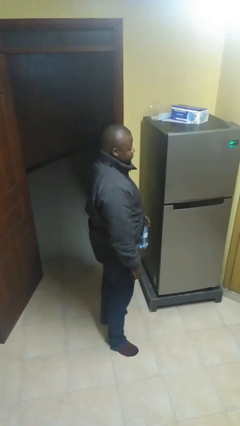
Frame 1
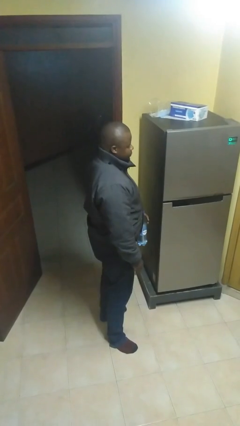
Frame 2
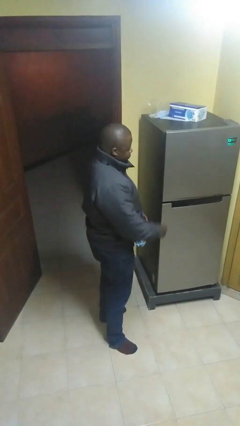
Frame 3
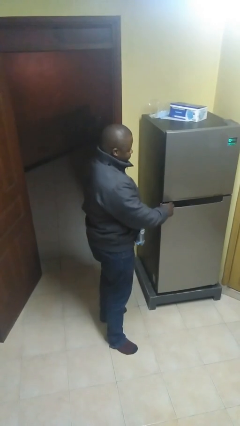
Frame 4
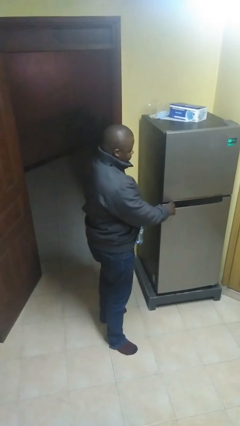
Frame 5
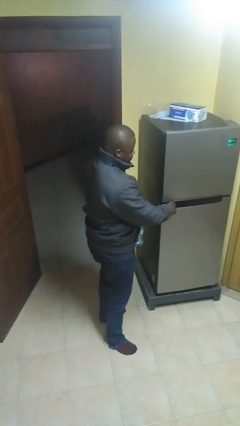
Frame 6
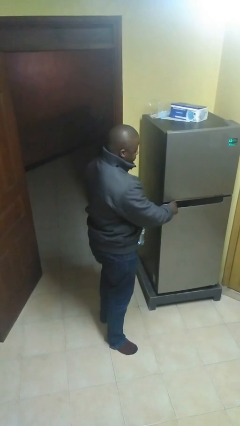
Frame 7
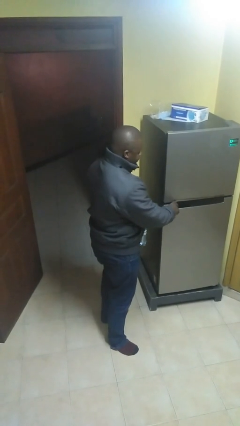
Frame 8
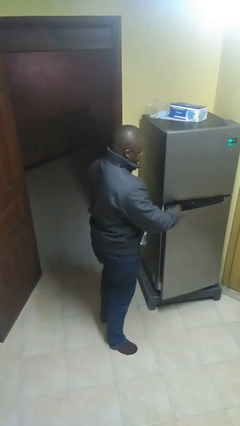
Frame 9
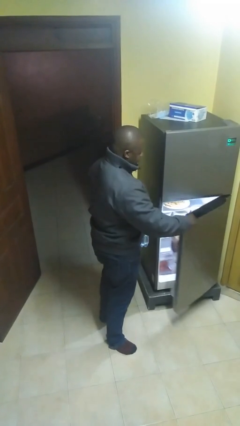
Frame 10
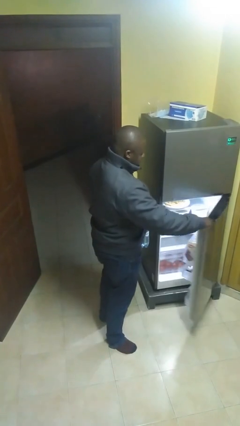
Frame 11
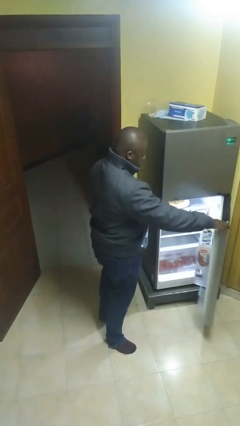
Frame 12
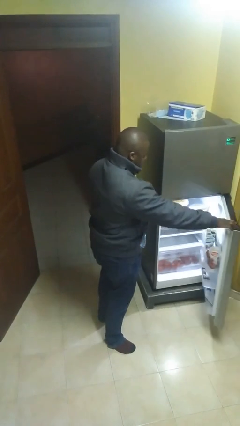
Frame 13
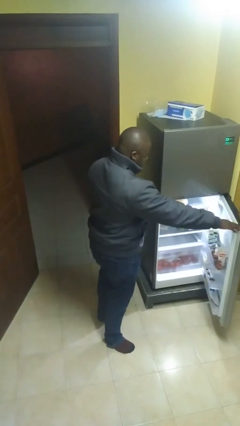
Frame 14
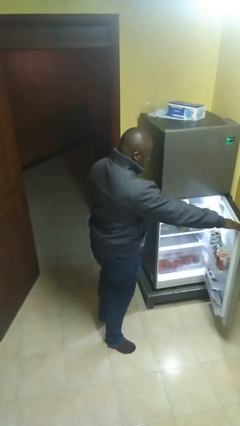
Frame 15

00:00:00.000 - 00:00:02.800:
person opens refrigerator

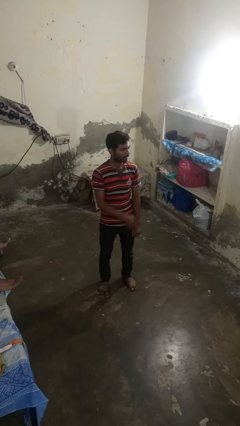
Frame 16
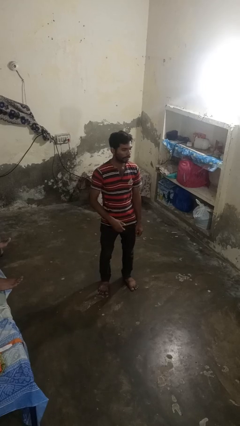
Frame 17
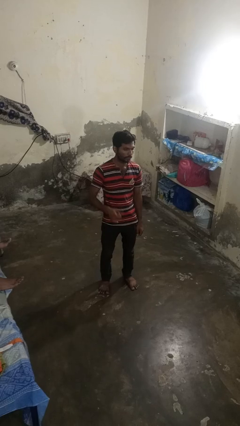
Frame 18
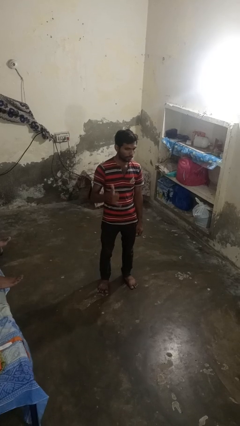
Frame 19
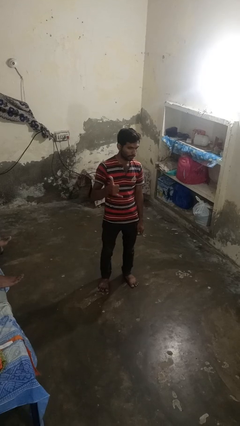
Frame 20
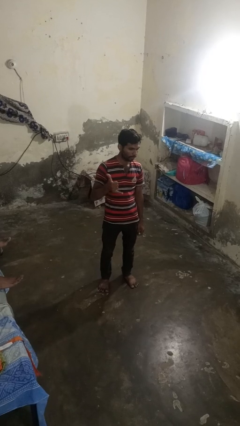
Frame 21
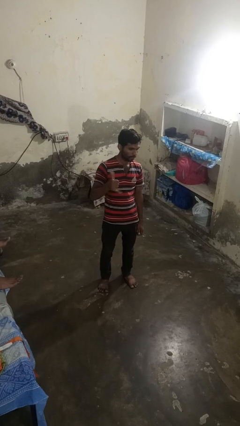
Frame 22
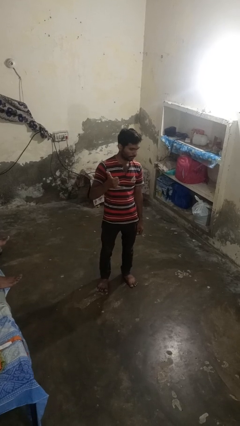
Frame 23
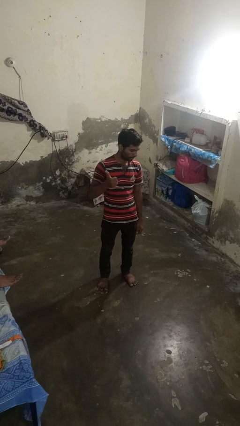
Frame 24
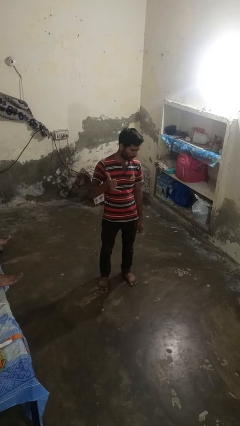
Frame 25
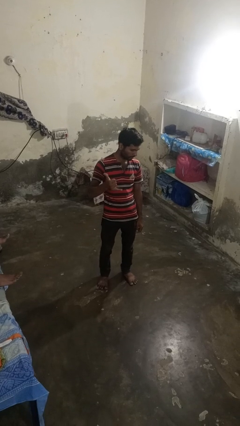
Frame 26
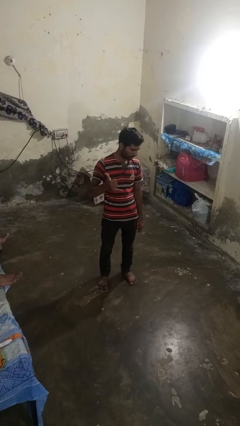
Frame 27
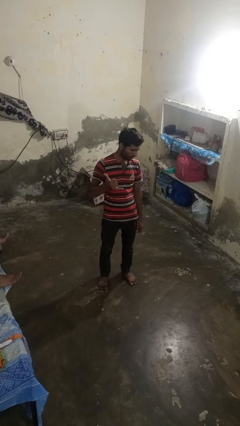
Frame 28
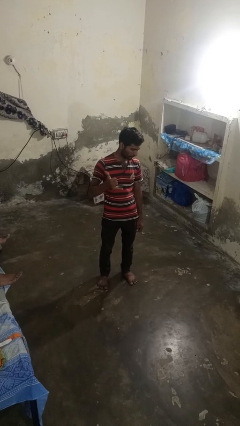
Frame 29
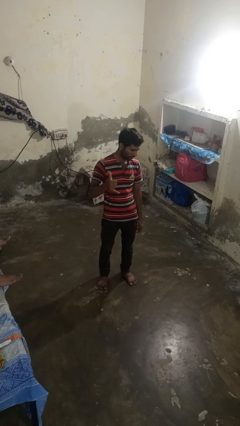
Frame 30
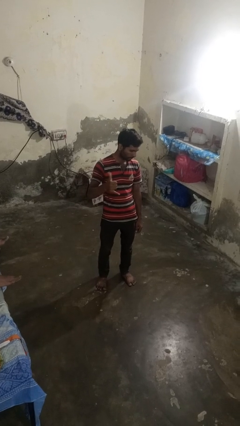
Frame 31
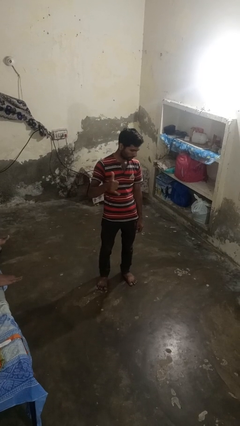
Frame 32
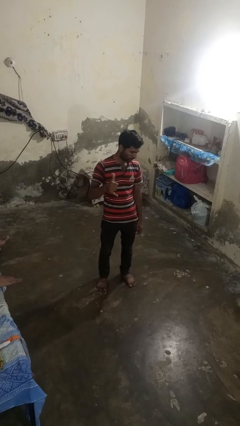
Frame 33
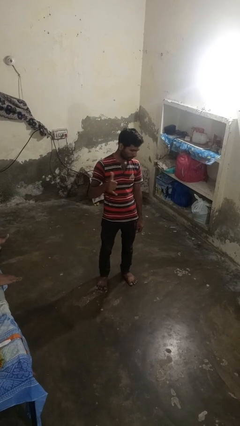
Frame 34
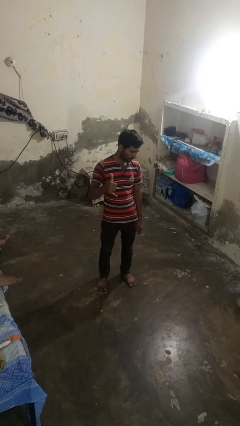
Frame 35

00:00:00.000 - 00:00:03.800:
person gestures hang loose

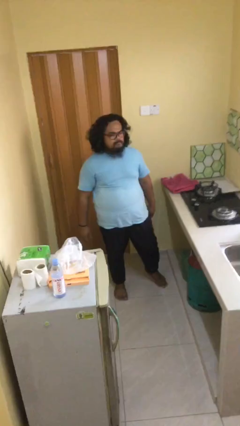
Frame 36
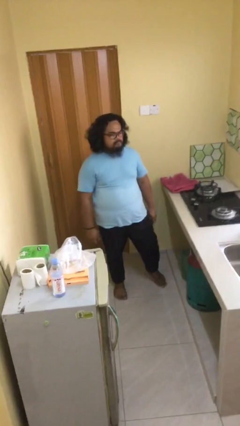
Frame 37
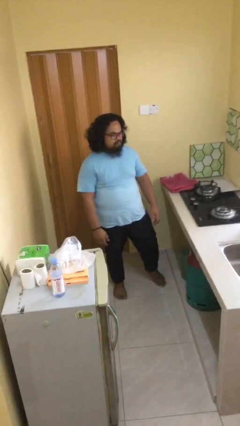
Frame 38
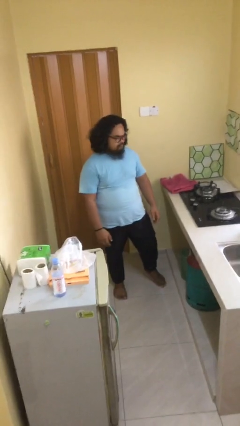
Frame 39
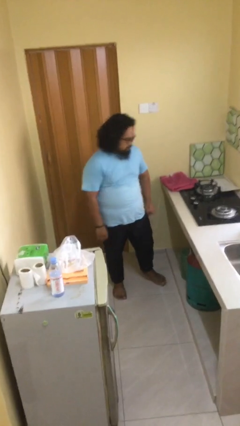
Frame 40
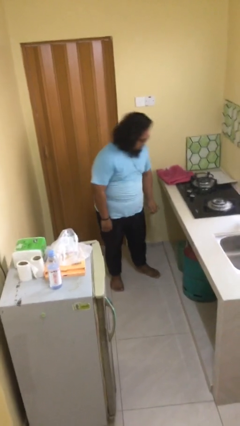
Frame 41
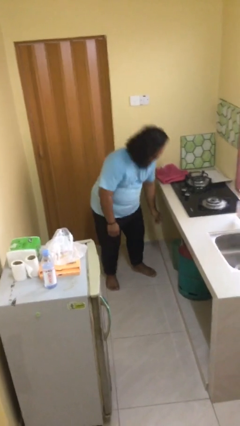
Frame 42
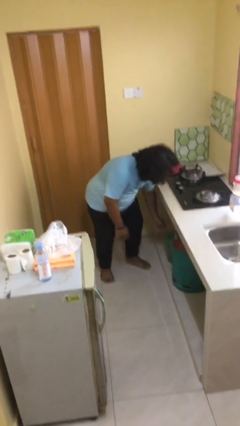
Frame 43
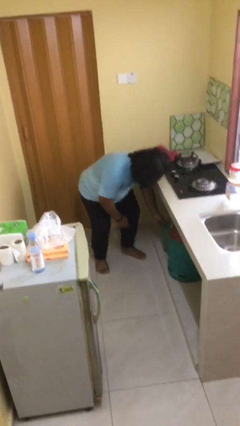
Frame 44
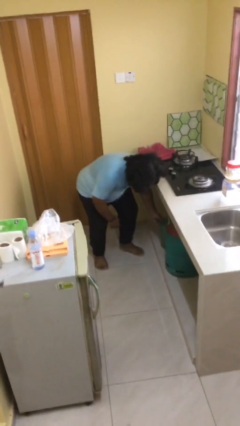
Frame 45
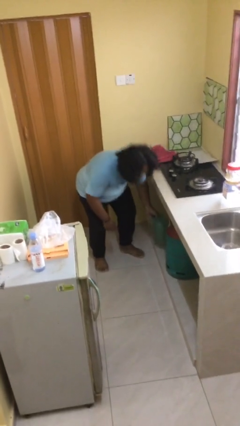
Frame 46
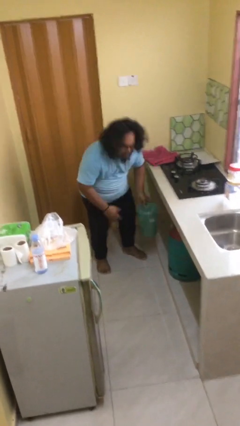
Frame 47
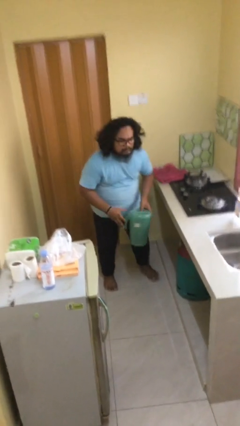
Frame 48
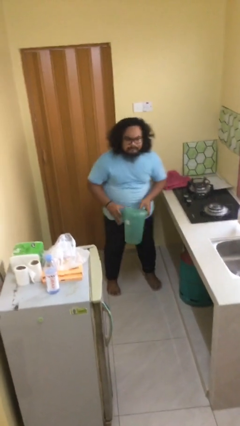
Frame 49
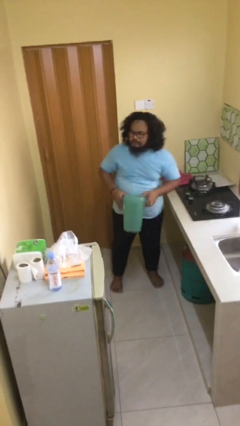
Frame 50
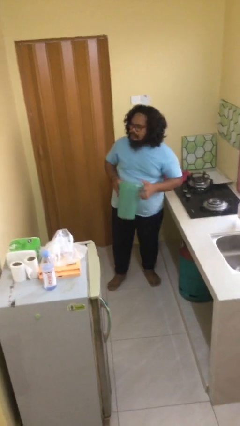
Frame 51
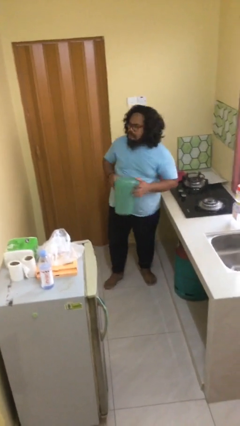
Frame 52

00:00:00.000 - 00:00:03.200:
person picks up object from cabinet

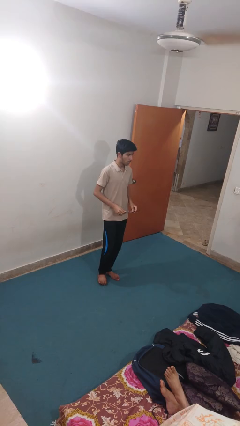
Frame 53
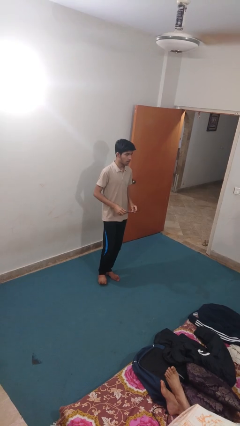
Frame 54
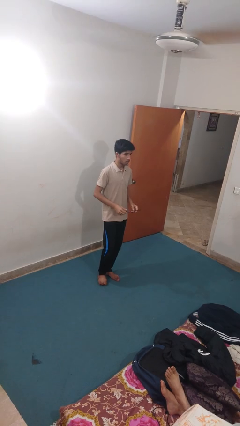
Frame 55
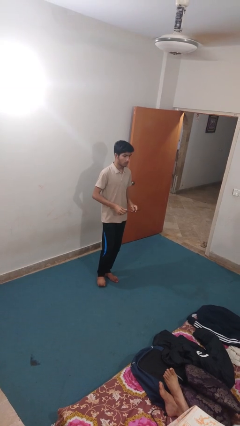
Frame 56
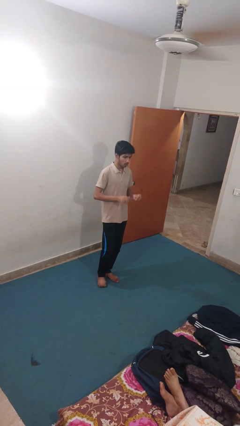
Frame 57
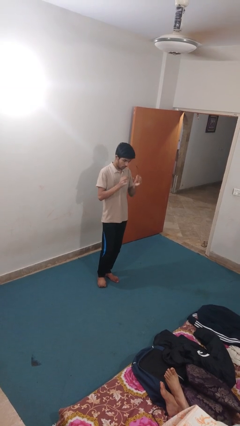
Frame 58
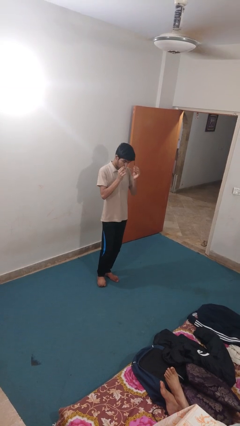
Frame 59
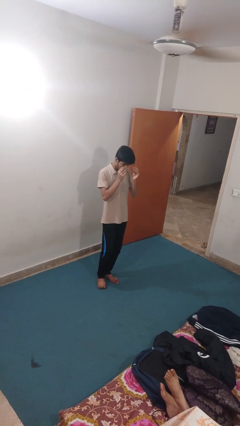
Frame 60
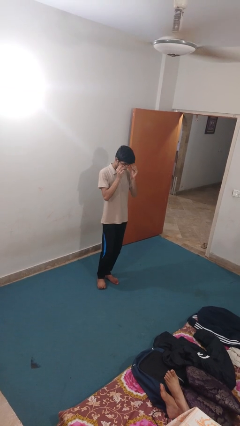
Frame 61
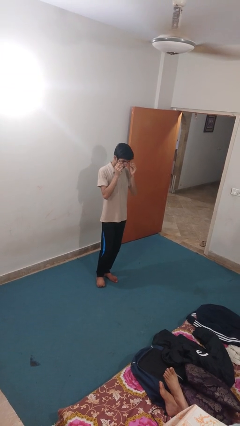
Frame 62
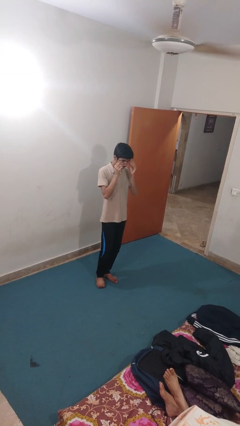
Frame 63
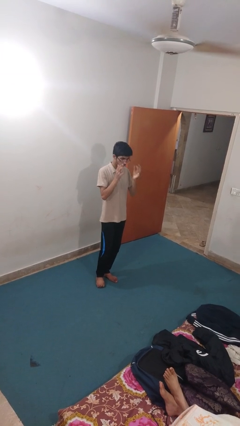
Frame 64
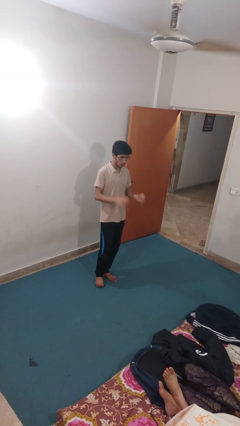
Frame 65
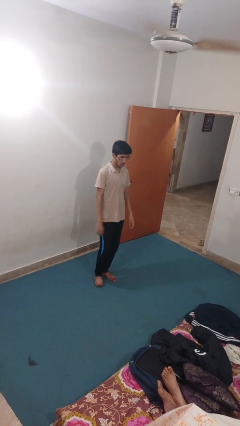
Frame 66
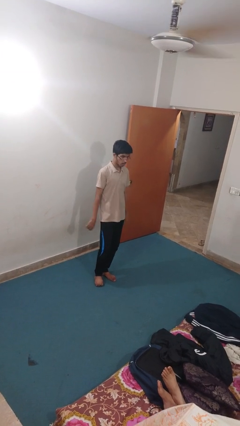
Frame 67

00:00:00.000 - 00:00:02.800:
person puts on glasses

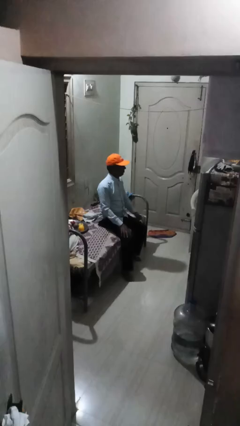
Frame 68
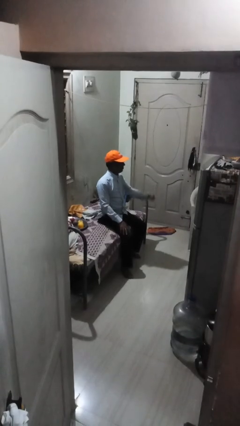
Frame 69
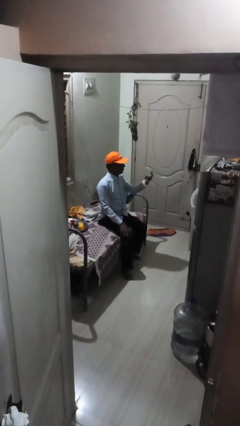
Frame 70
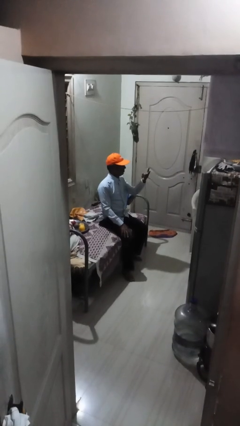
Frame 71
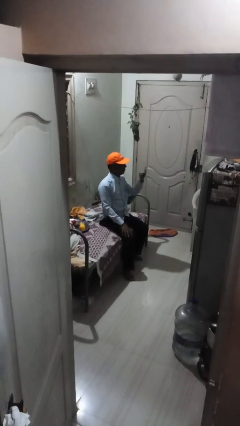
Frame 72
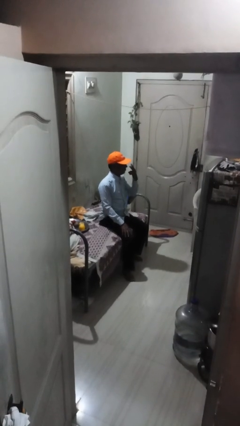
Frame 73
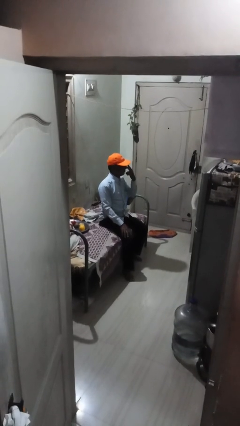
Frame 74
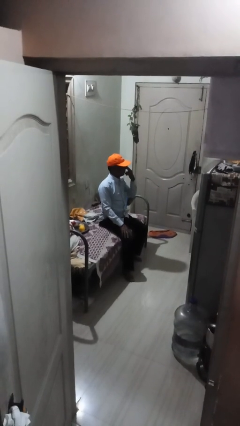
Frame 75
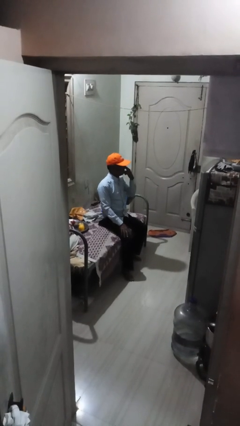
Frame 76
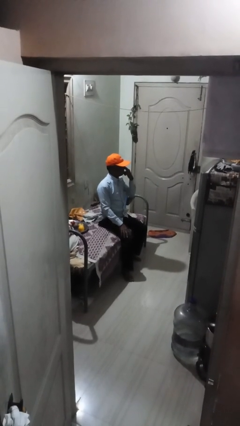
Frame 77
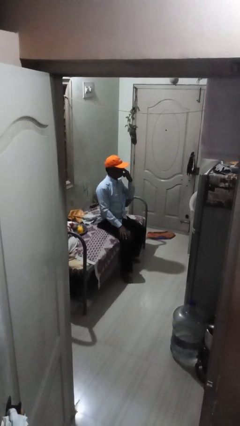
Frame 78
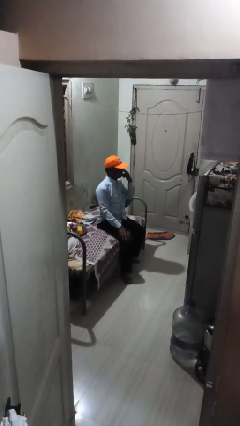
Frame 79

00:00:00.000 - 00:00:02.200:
person gestures watch closely

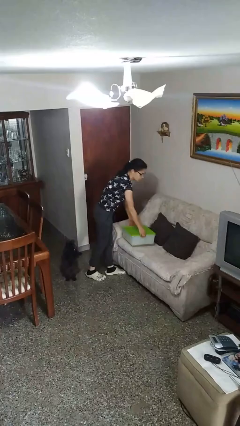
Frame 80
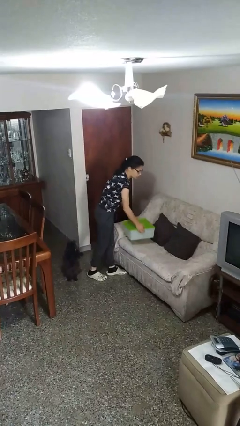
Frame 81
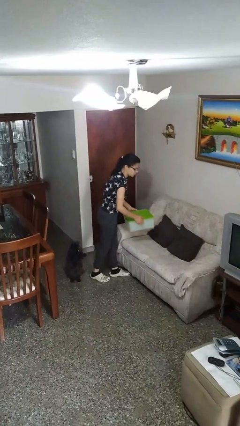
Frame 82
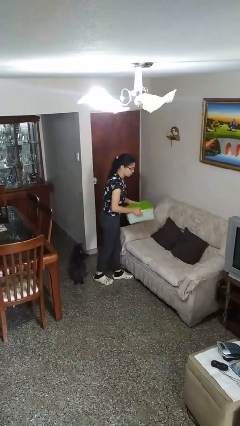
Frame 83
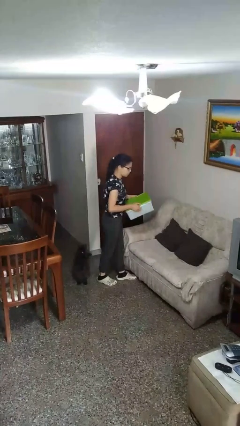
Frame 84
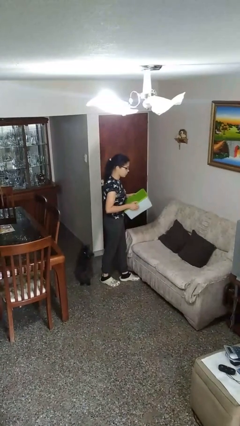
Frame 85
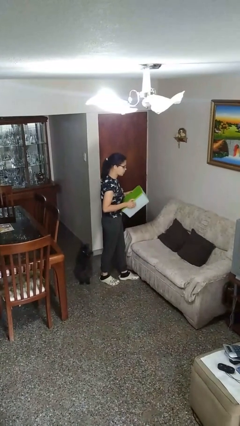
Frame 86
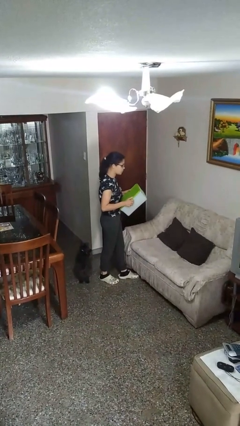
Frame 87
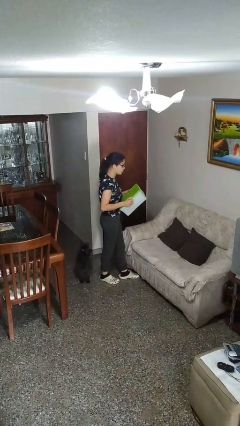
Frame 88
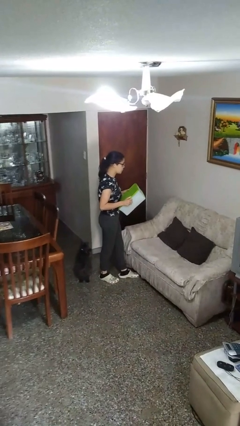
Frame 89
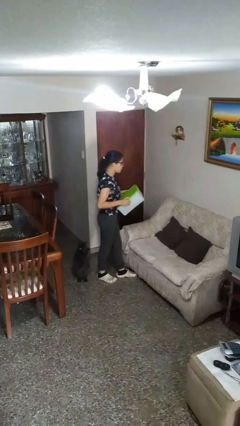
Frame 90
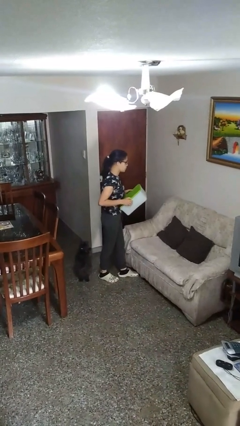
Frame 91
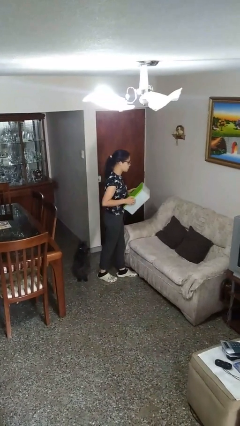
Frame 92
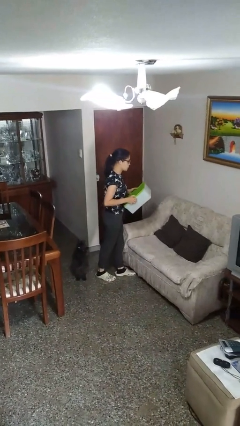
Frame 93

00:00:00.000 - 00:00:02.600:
person picks up object from couch
